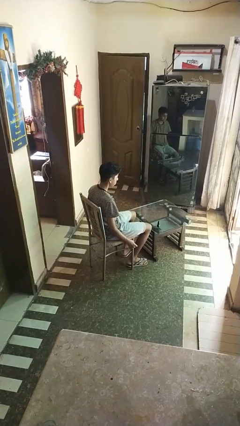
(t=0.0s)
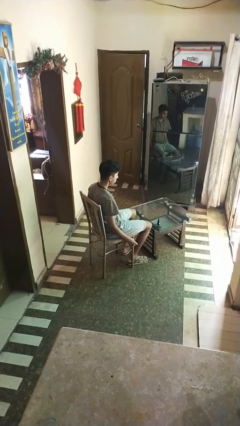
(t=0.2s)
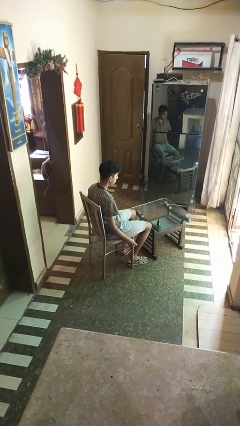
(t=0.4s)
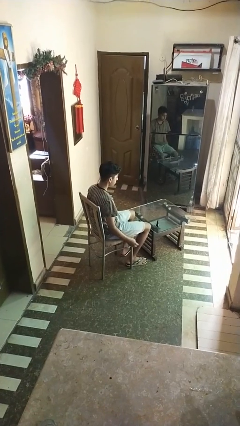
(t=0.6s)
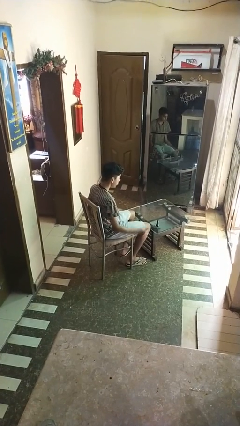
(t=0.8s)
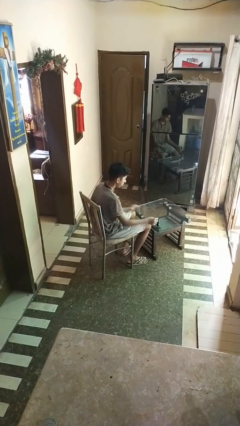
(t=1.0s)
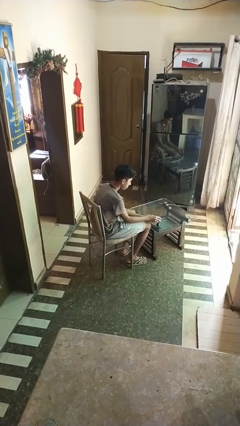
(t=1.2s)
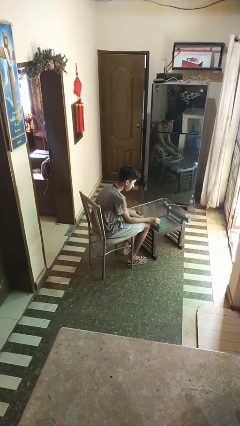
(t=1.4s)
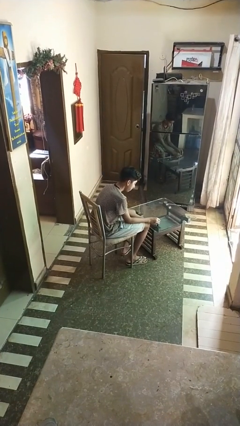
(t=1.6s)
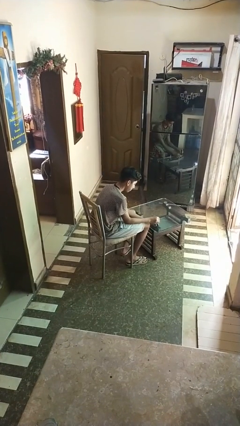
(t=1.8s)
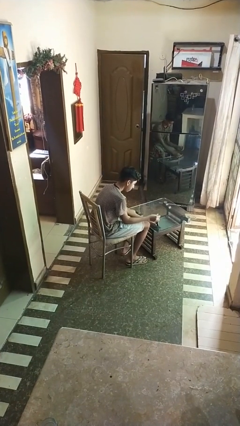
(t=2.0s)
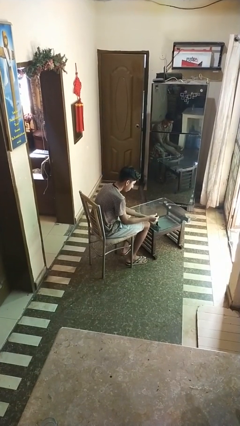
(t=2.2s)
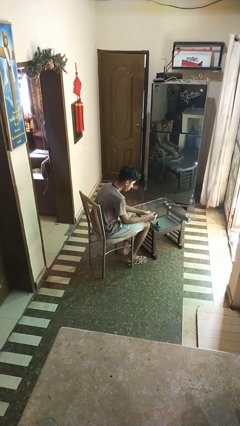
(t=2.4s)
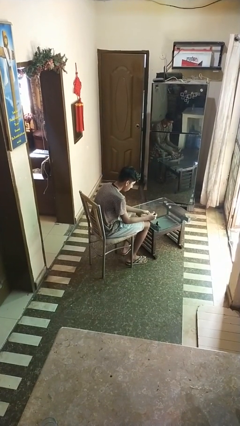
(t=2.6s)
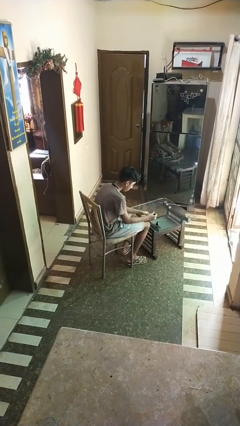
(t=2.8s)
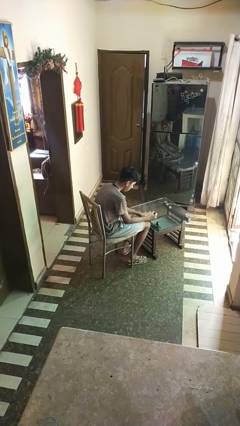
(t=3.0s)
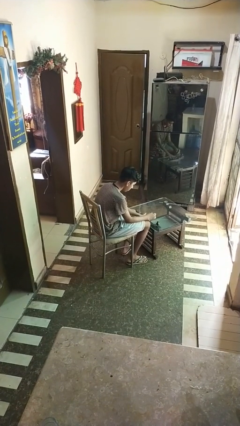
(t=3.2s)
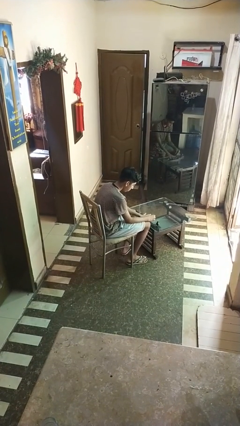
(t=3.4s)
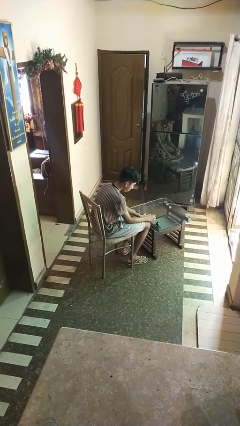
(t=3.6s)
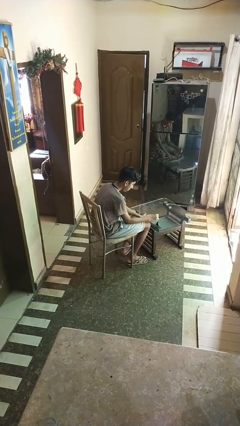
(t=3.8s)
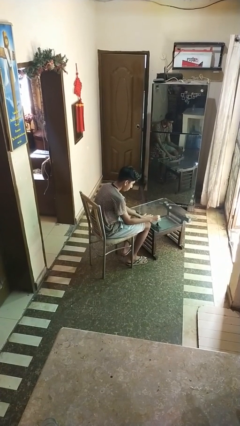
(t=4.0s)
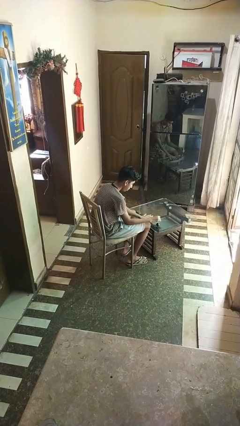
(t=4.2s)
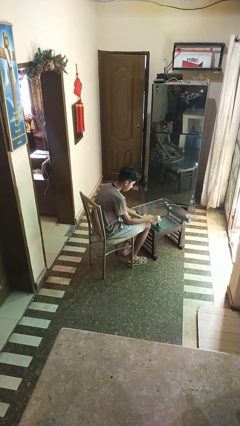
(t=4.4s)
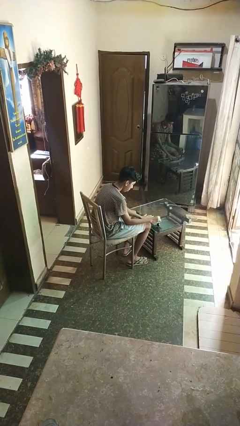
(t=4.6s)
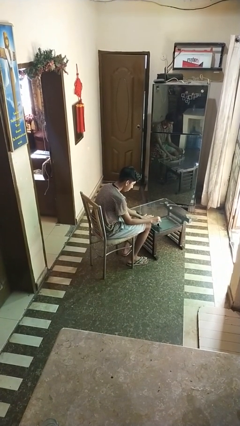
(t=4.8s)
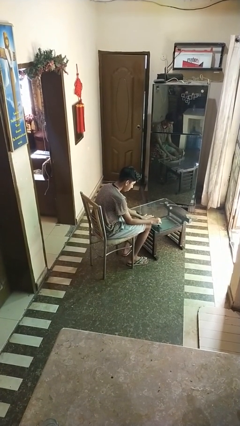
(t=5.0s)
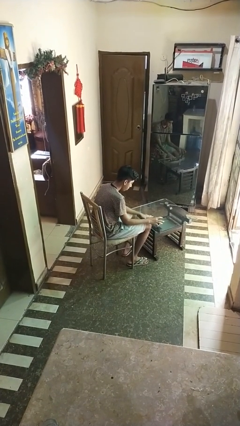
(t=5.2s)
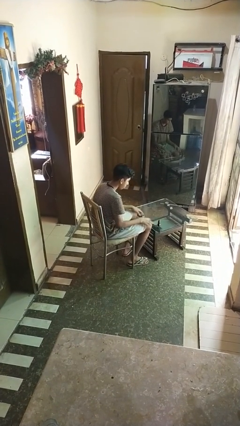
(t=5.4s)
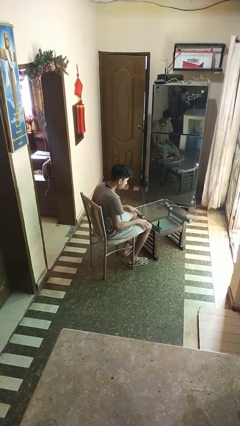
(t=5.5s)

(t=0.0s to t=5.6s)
person paints fingernails

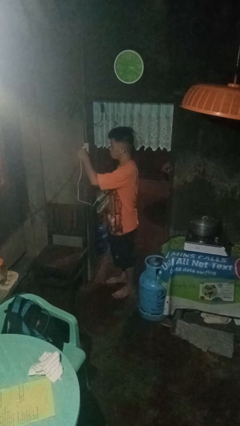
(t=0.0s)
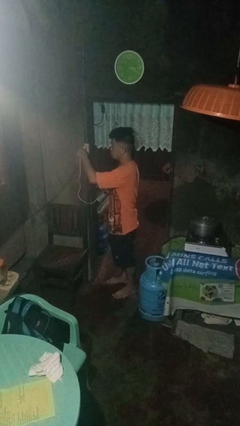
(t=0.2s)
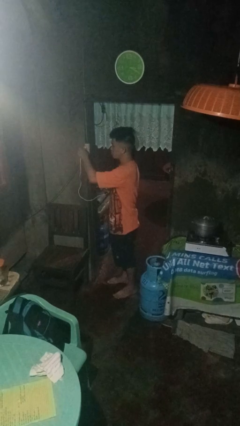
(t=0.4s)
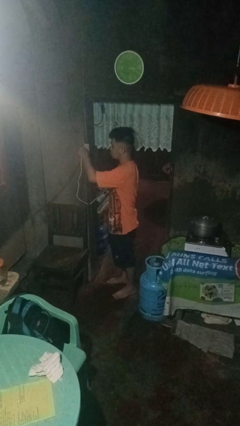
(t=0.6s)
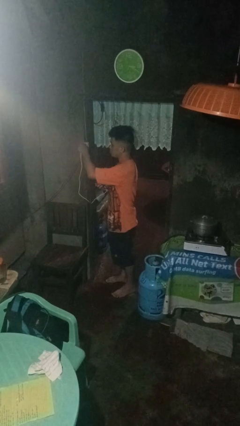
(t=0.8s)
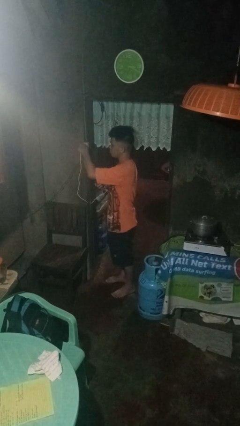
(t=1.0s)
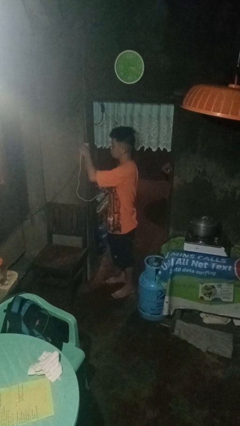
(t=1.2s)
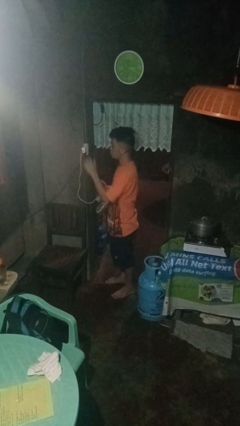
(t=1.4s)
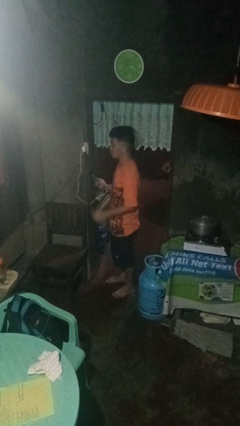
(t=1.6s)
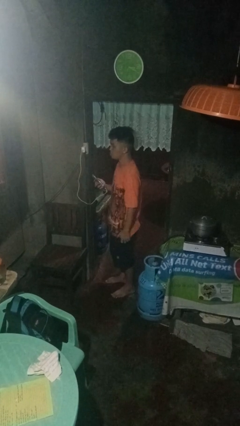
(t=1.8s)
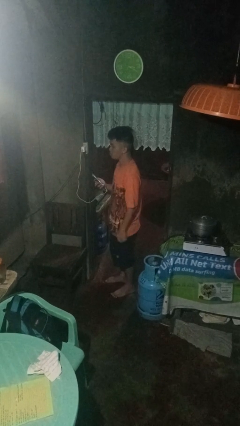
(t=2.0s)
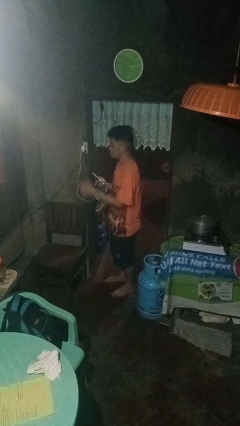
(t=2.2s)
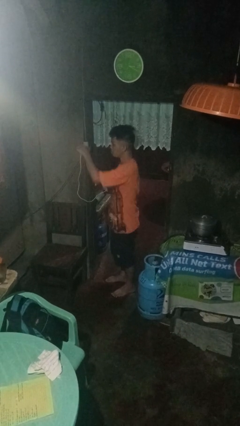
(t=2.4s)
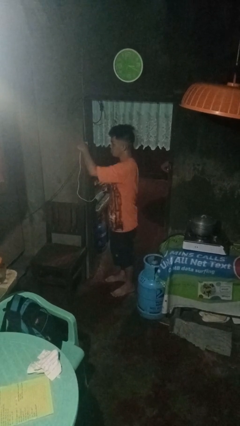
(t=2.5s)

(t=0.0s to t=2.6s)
person plugs into electrical socket

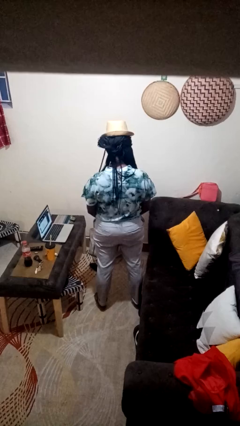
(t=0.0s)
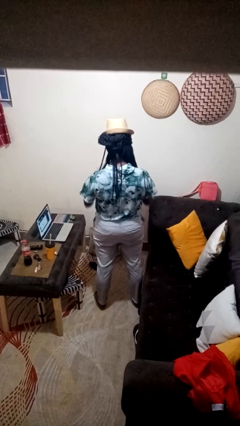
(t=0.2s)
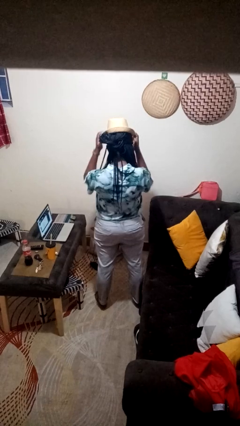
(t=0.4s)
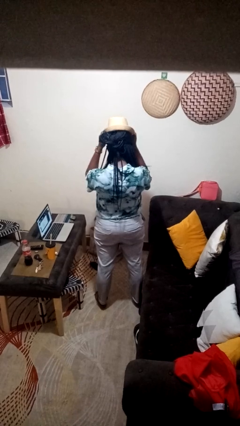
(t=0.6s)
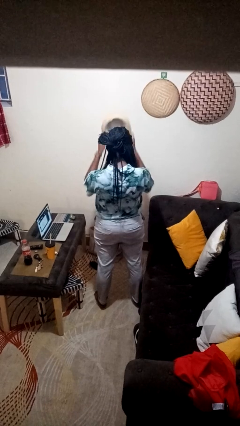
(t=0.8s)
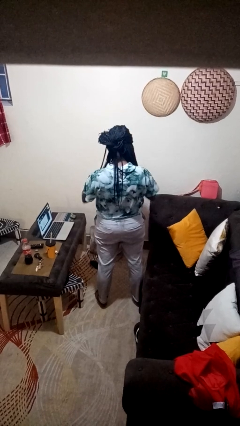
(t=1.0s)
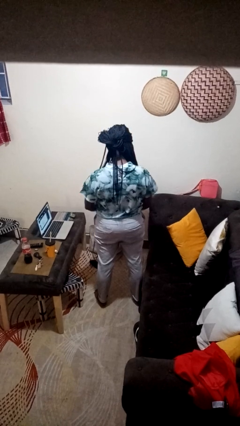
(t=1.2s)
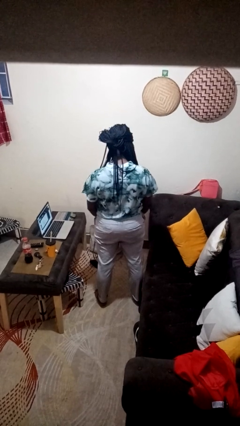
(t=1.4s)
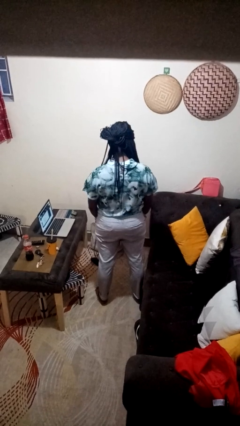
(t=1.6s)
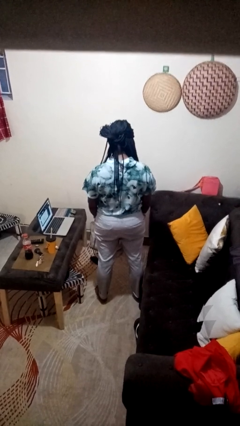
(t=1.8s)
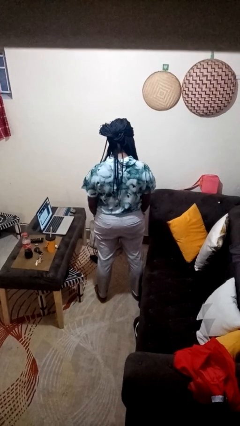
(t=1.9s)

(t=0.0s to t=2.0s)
person takes off hat

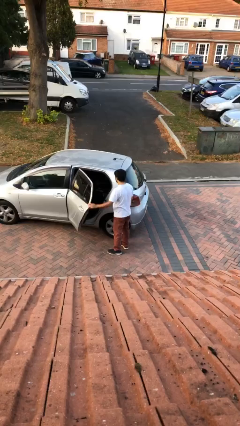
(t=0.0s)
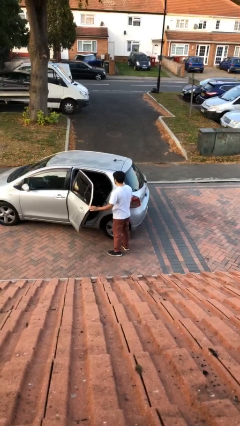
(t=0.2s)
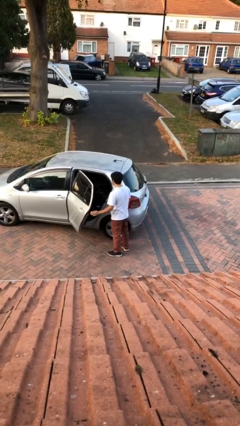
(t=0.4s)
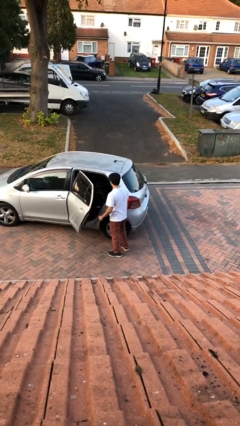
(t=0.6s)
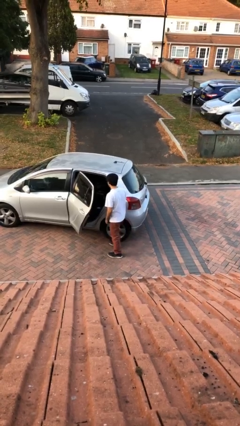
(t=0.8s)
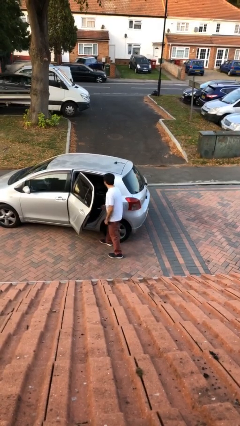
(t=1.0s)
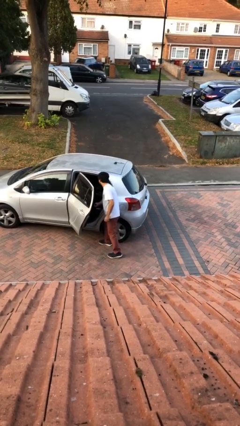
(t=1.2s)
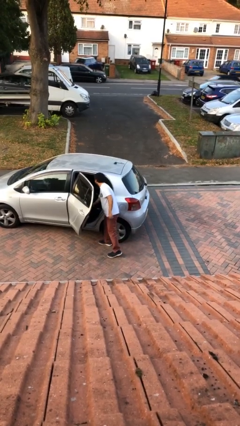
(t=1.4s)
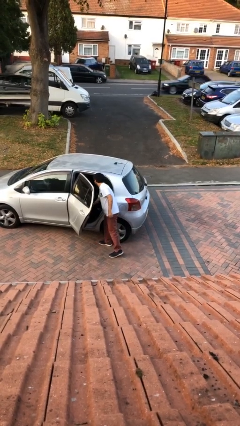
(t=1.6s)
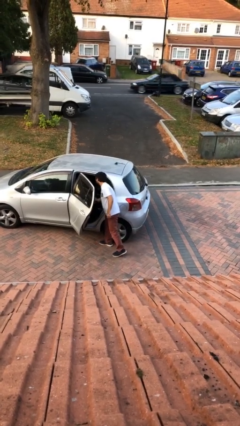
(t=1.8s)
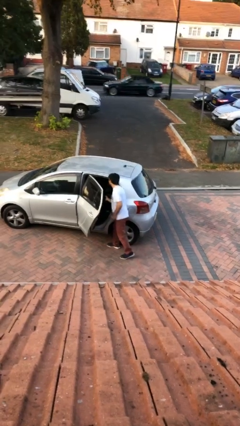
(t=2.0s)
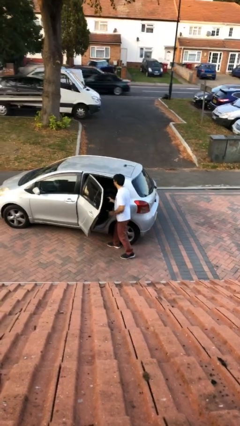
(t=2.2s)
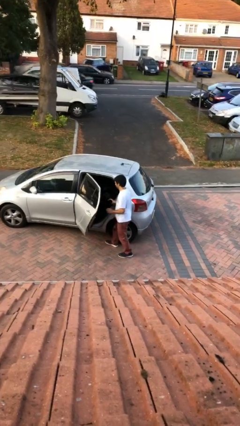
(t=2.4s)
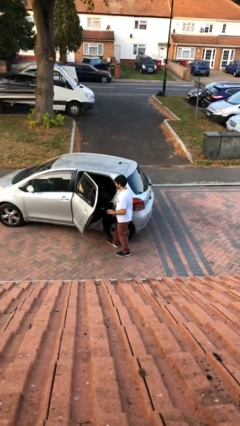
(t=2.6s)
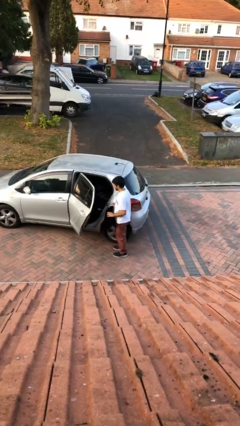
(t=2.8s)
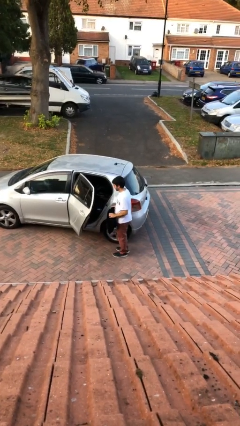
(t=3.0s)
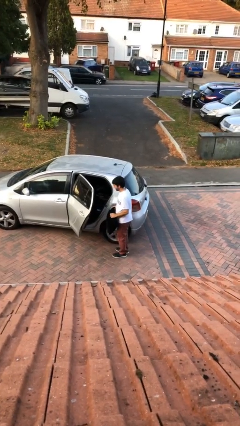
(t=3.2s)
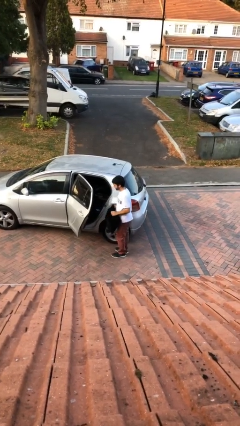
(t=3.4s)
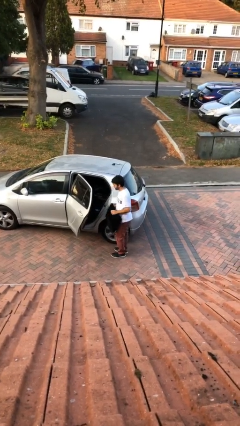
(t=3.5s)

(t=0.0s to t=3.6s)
person unloads car

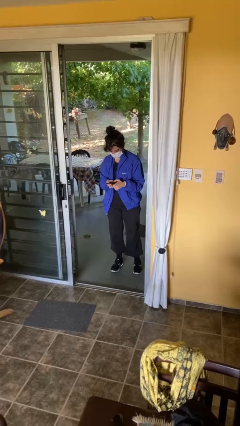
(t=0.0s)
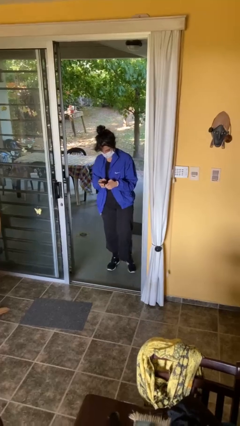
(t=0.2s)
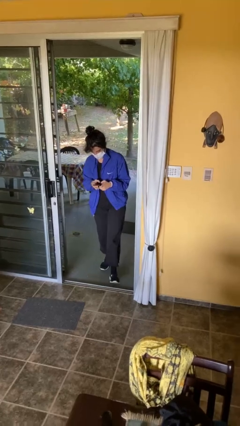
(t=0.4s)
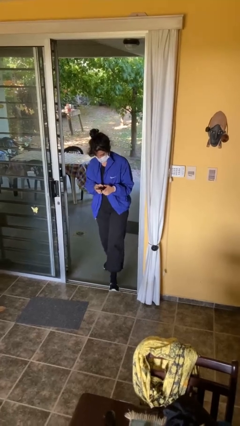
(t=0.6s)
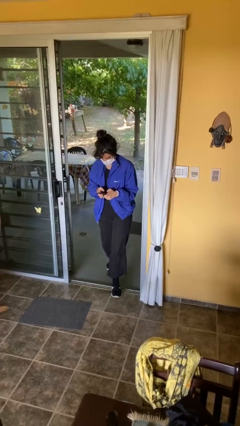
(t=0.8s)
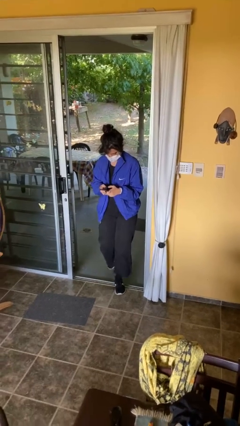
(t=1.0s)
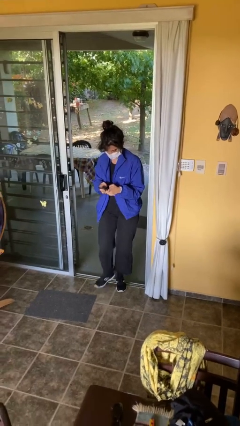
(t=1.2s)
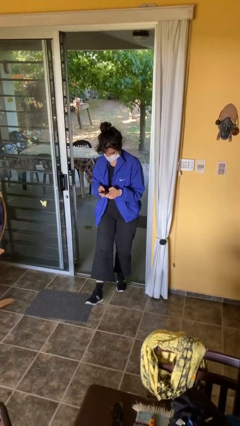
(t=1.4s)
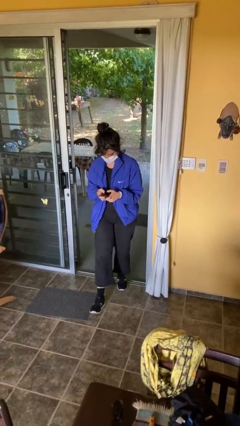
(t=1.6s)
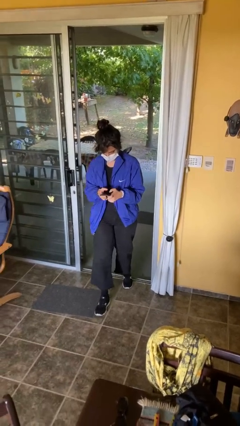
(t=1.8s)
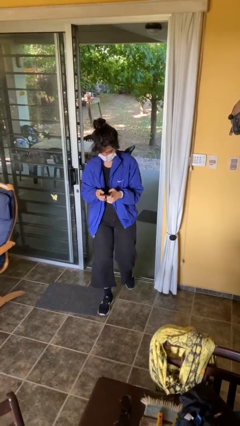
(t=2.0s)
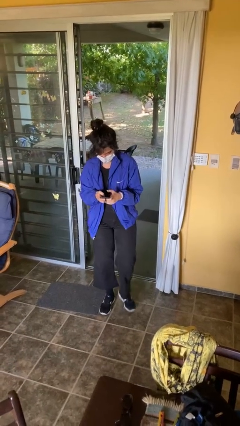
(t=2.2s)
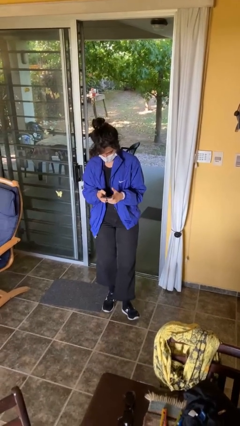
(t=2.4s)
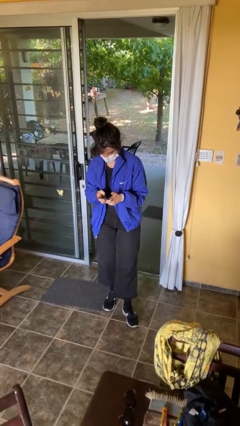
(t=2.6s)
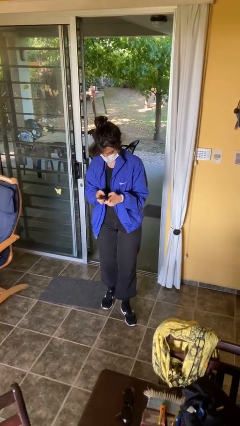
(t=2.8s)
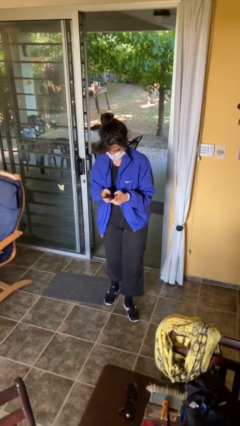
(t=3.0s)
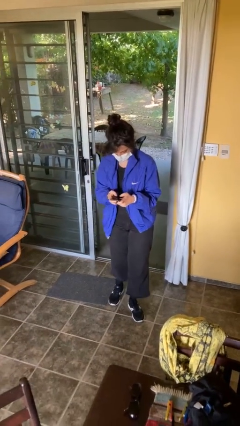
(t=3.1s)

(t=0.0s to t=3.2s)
person enters scene through structure

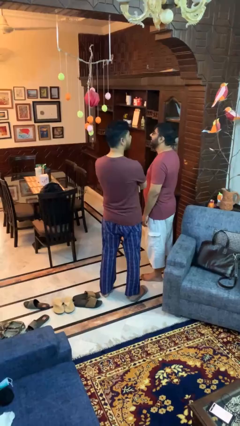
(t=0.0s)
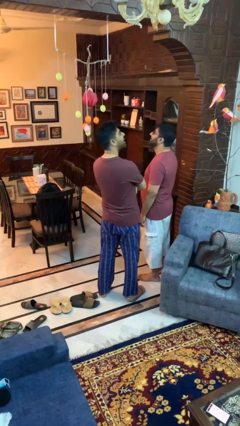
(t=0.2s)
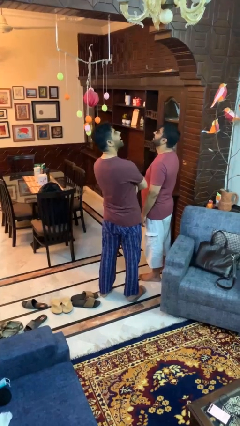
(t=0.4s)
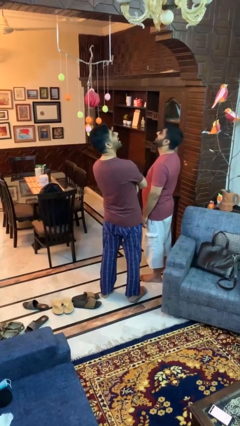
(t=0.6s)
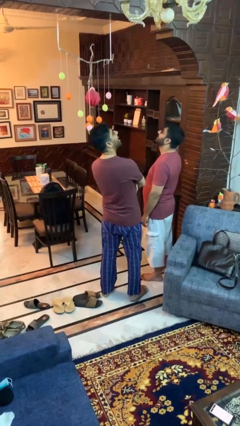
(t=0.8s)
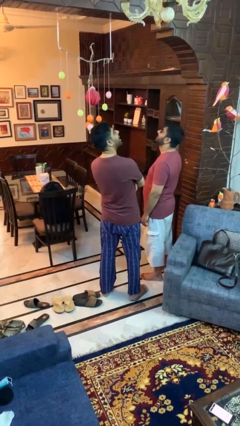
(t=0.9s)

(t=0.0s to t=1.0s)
person laughs with person
